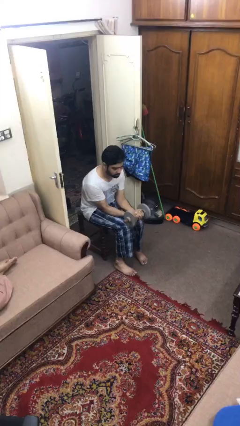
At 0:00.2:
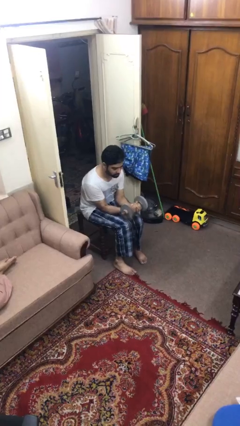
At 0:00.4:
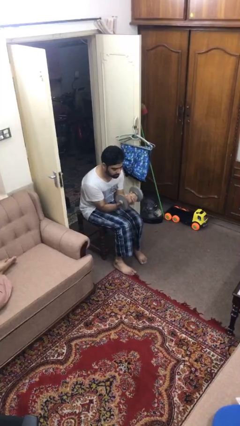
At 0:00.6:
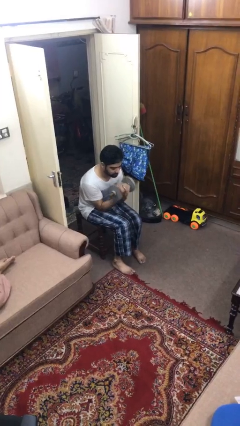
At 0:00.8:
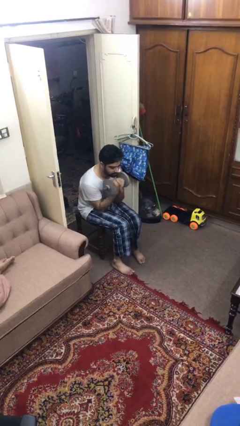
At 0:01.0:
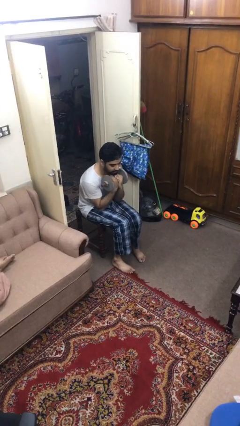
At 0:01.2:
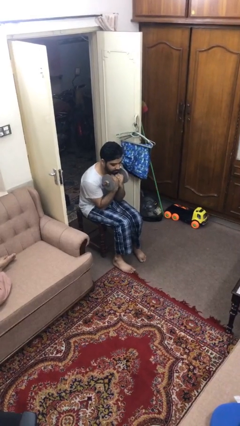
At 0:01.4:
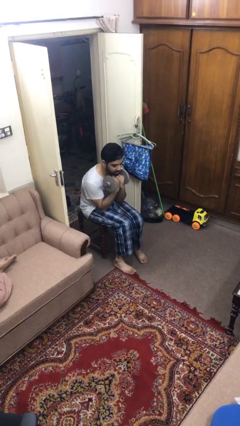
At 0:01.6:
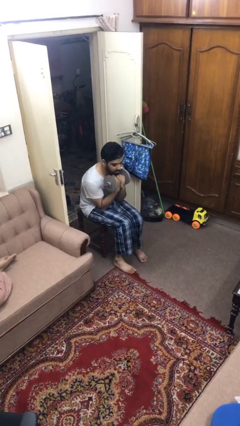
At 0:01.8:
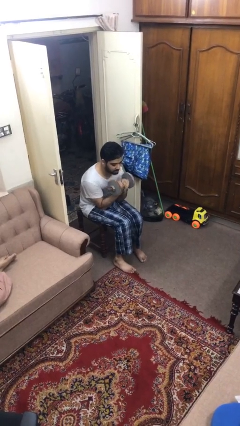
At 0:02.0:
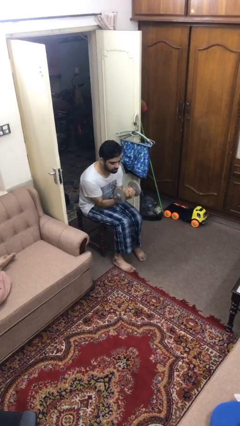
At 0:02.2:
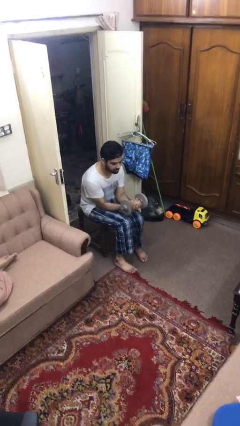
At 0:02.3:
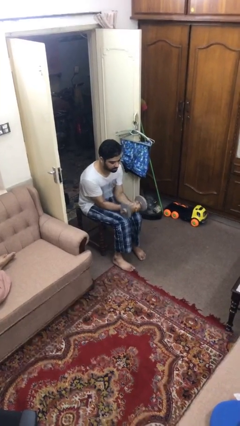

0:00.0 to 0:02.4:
person lifts dumbbells

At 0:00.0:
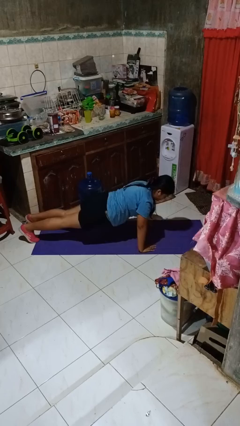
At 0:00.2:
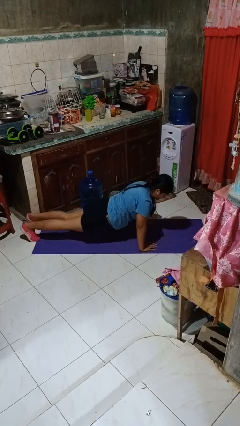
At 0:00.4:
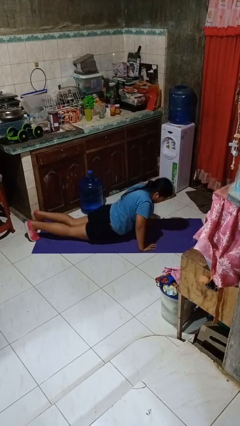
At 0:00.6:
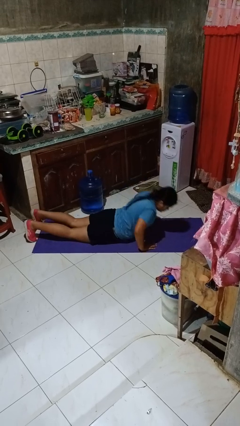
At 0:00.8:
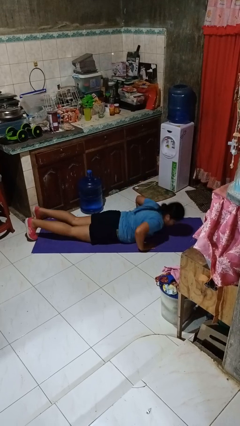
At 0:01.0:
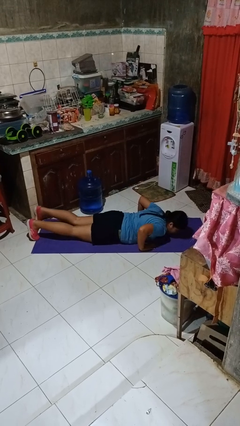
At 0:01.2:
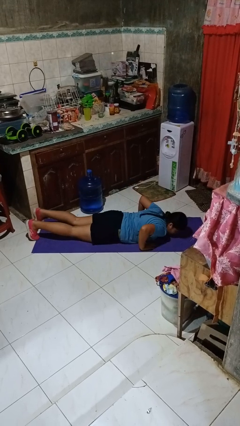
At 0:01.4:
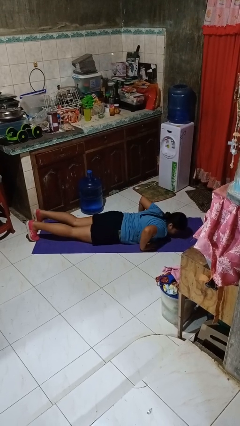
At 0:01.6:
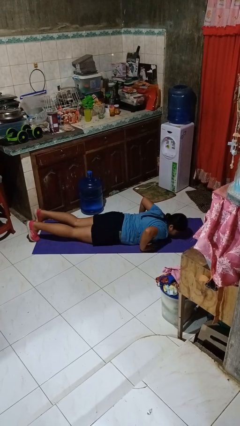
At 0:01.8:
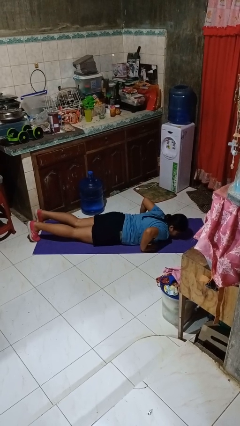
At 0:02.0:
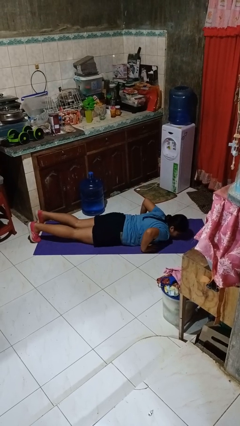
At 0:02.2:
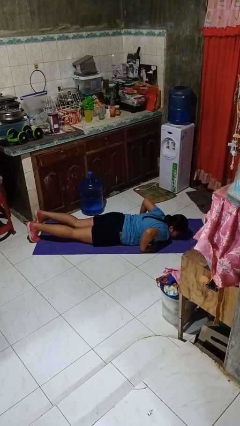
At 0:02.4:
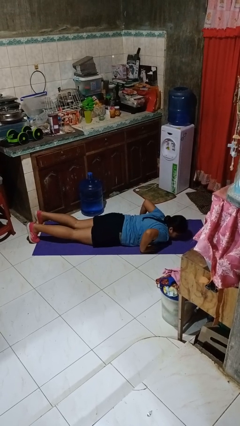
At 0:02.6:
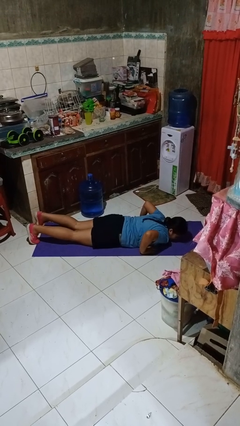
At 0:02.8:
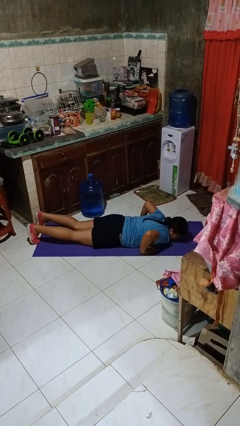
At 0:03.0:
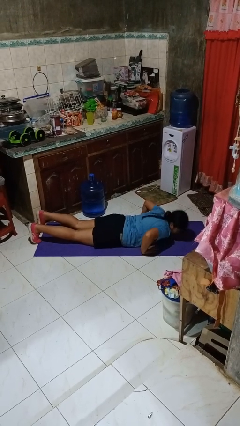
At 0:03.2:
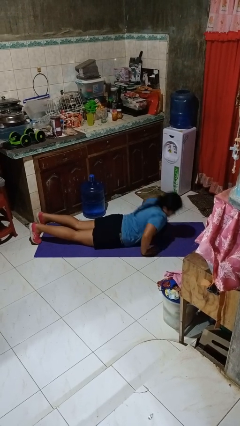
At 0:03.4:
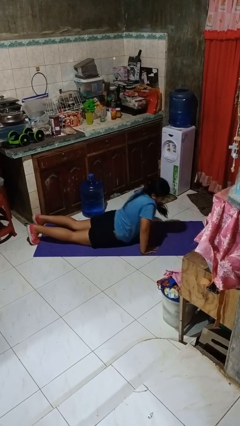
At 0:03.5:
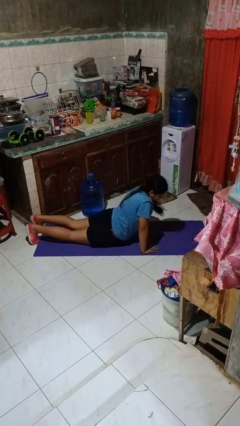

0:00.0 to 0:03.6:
person exercises with pushup

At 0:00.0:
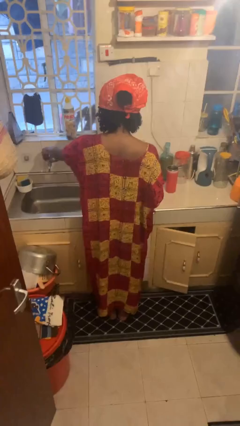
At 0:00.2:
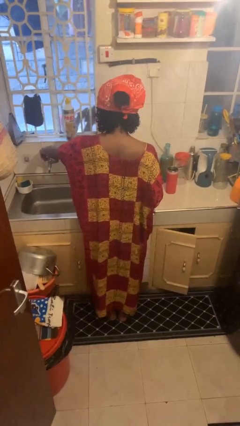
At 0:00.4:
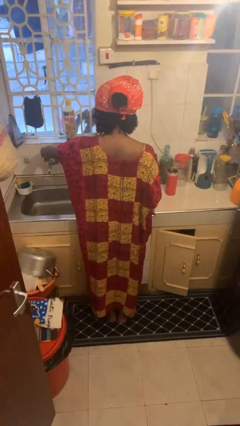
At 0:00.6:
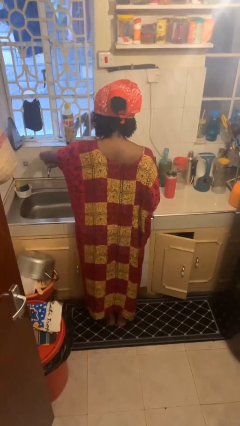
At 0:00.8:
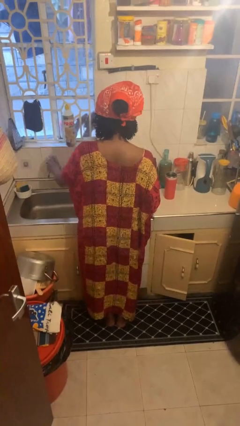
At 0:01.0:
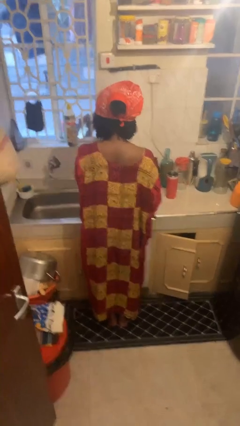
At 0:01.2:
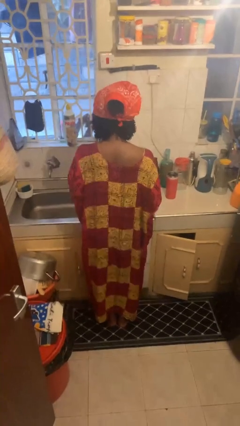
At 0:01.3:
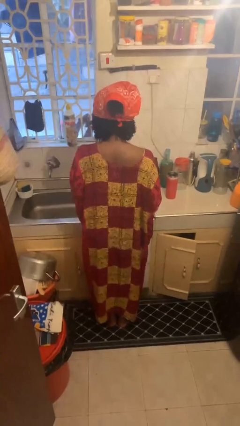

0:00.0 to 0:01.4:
person turns off faucet

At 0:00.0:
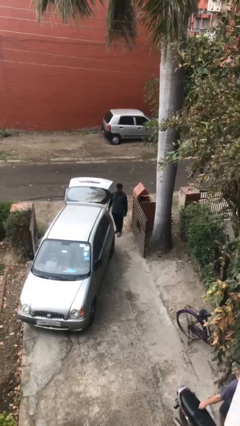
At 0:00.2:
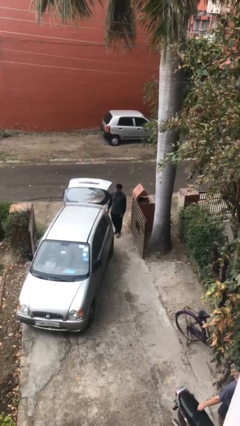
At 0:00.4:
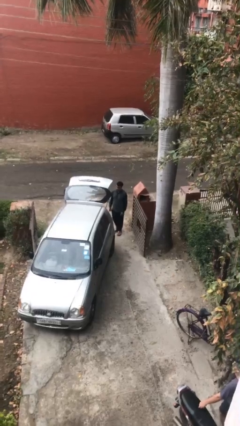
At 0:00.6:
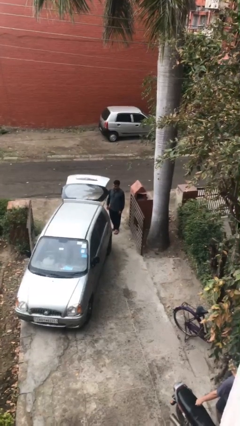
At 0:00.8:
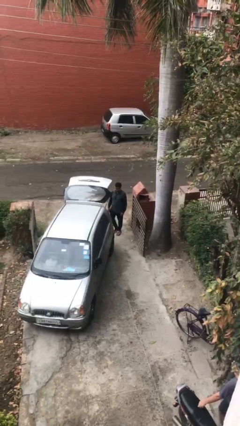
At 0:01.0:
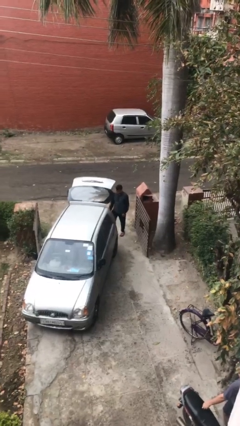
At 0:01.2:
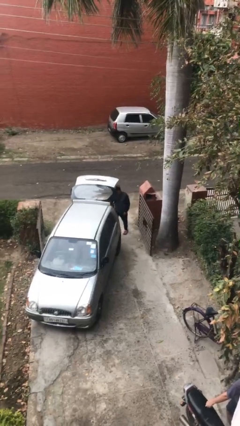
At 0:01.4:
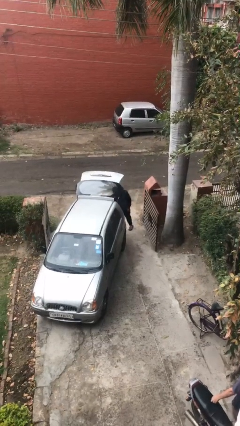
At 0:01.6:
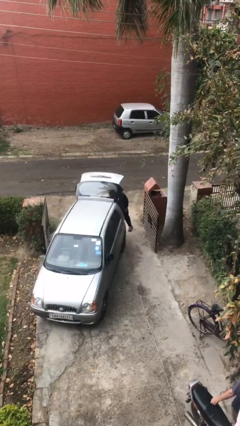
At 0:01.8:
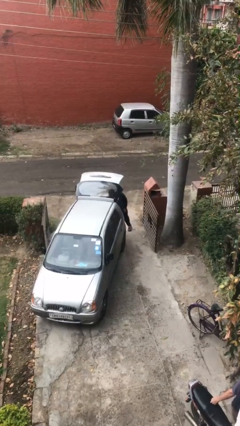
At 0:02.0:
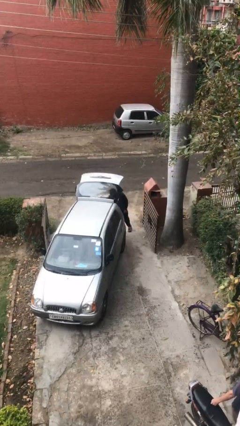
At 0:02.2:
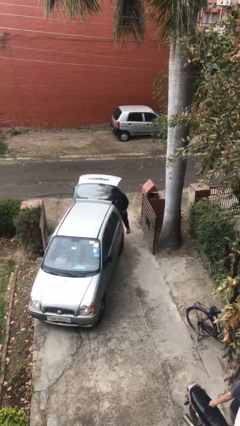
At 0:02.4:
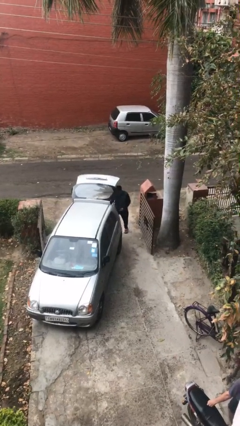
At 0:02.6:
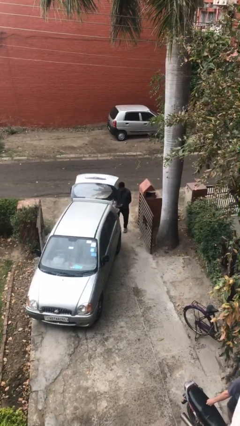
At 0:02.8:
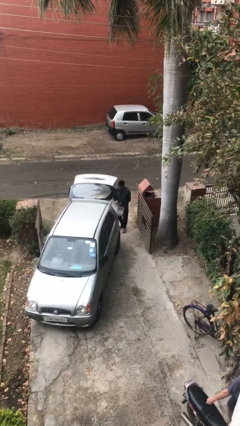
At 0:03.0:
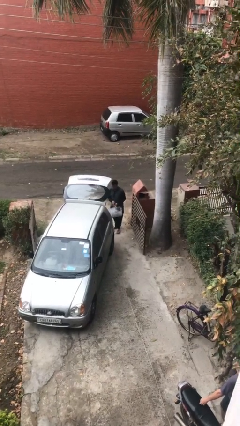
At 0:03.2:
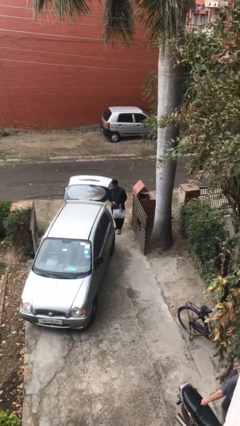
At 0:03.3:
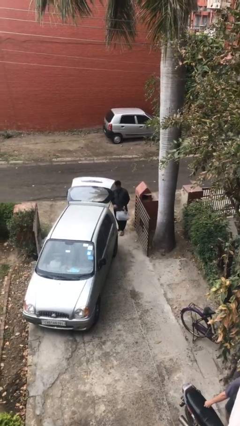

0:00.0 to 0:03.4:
person unloads car

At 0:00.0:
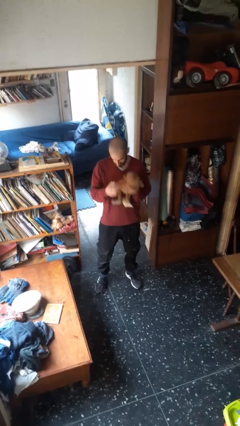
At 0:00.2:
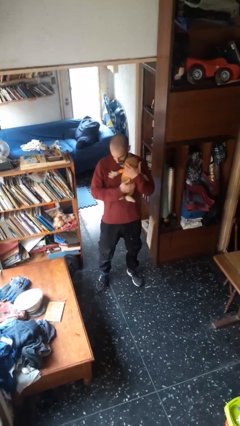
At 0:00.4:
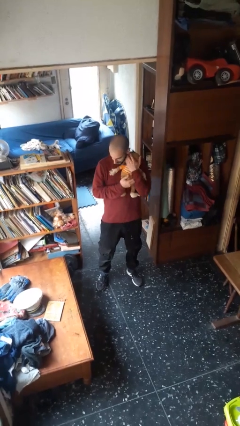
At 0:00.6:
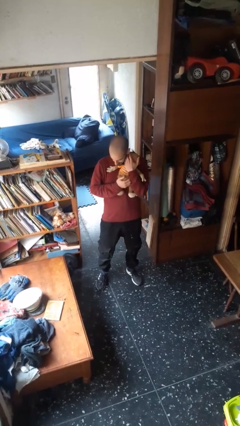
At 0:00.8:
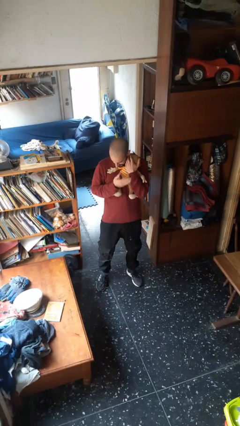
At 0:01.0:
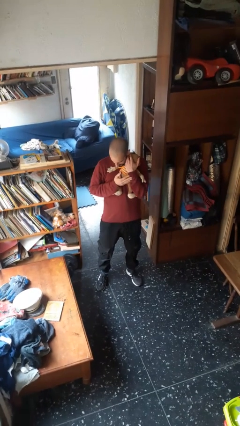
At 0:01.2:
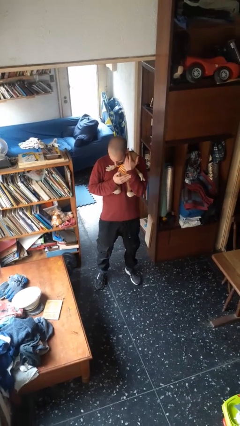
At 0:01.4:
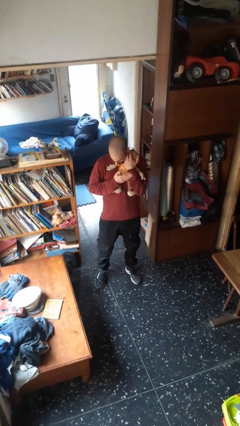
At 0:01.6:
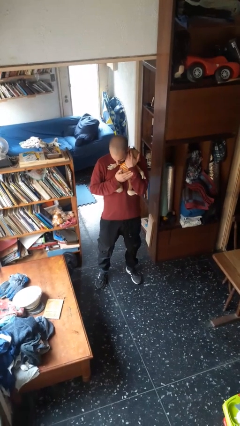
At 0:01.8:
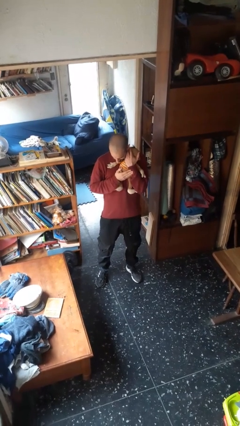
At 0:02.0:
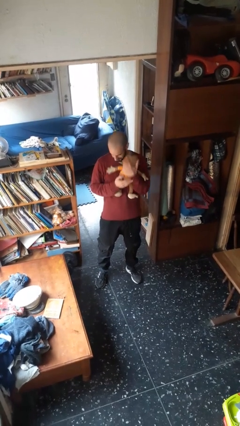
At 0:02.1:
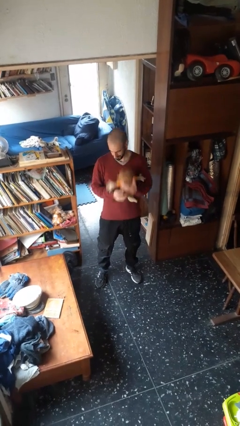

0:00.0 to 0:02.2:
person hugs stuffed animal

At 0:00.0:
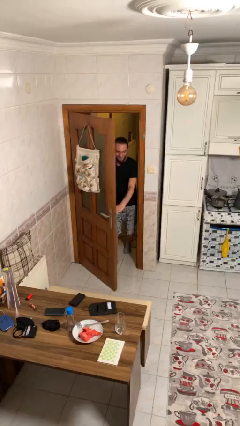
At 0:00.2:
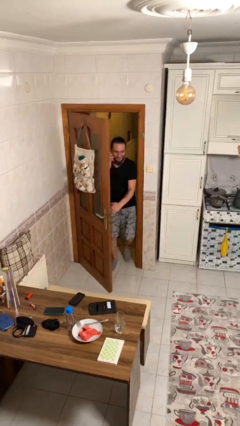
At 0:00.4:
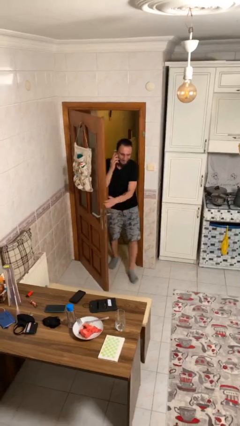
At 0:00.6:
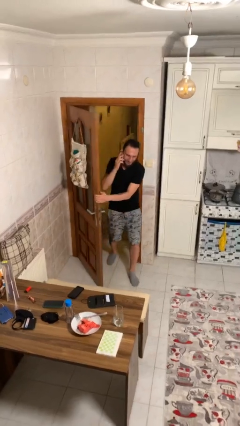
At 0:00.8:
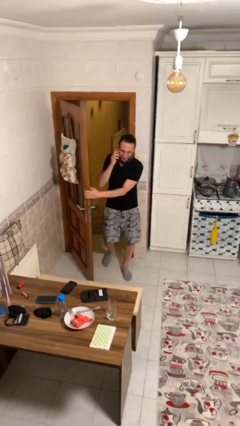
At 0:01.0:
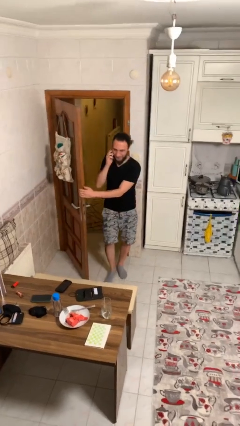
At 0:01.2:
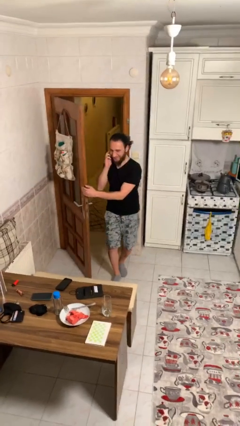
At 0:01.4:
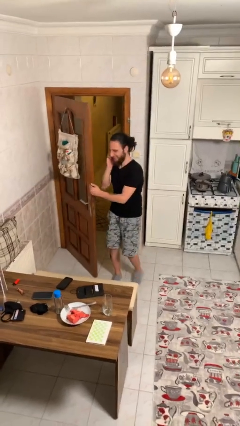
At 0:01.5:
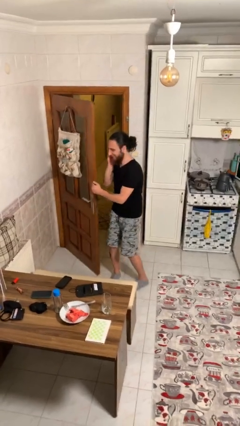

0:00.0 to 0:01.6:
person enters scene through structure

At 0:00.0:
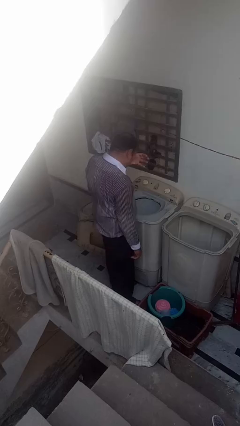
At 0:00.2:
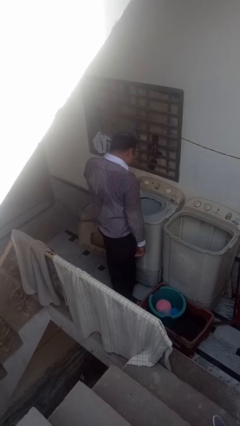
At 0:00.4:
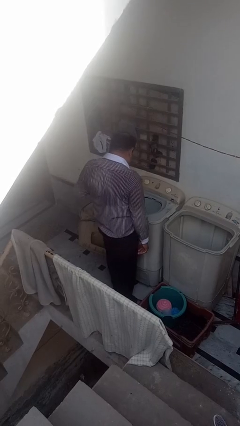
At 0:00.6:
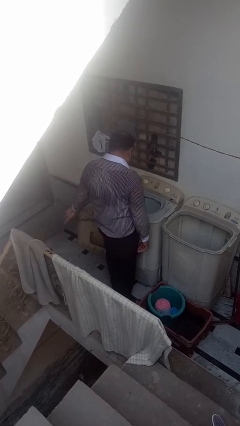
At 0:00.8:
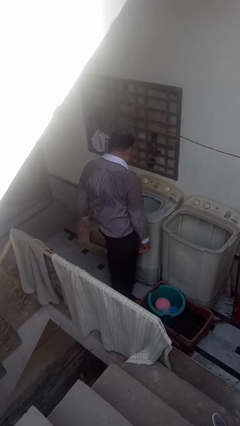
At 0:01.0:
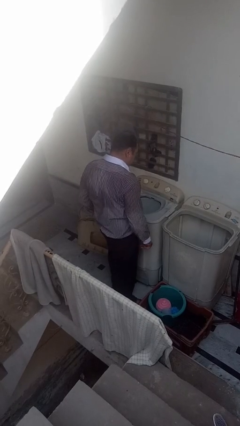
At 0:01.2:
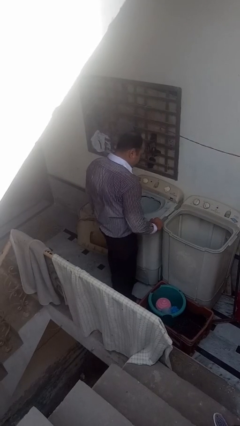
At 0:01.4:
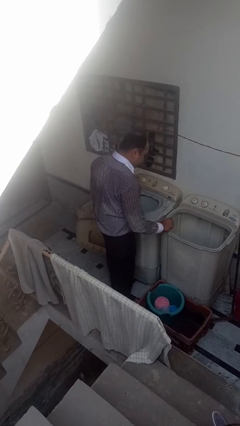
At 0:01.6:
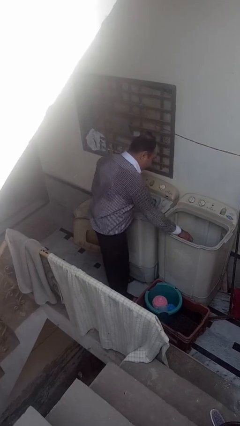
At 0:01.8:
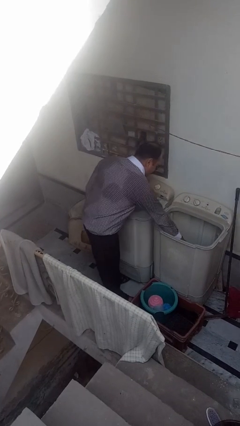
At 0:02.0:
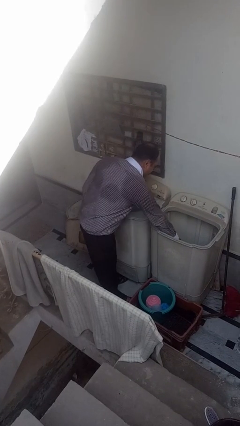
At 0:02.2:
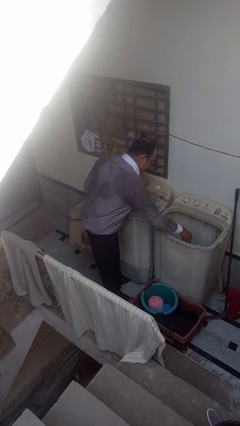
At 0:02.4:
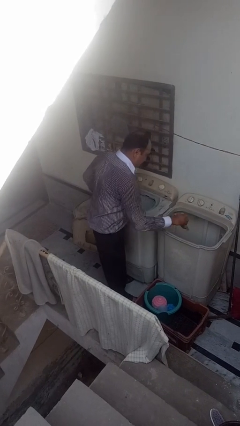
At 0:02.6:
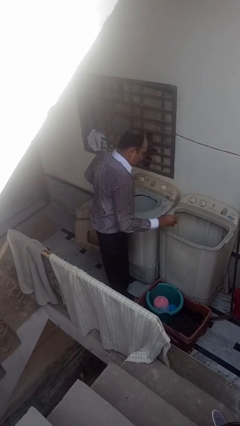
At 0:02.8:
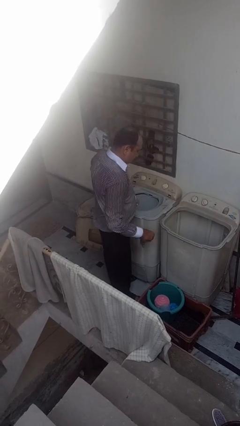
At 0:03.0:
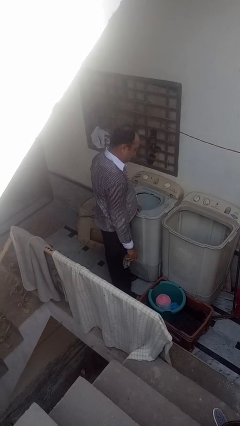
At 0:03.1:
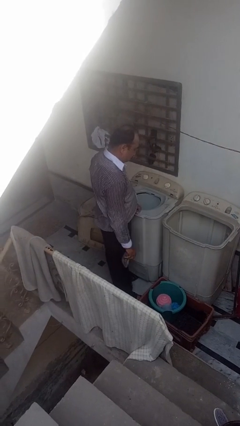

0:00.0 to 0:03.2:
person unloads clotheswasher
